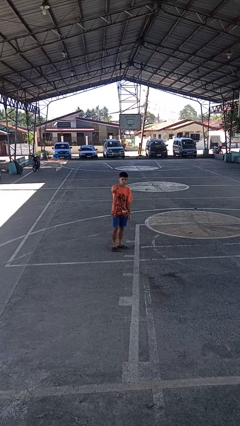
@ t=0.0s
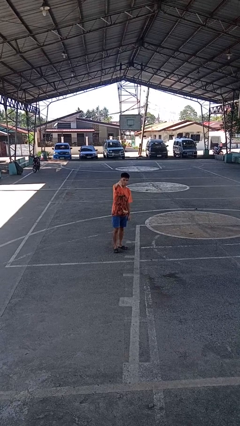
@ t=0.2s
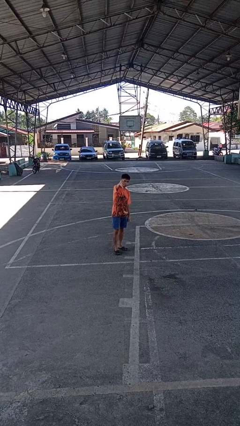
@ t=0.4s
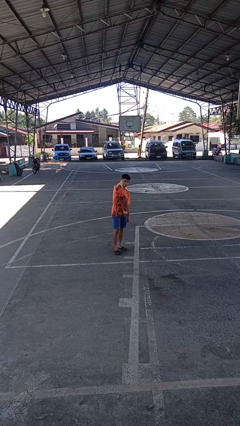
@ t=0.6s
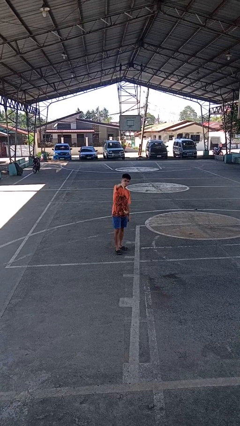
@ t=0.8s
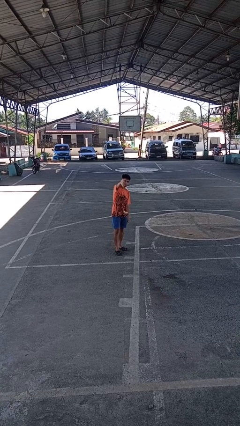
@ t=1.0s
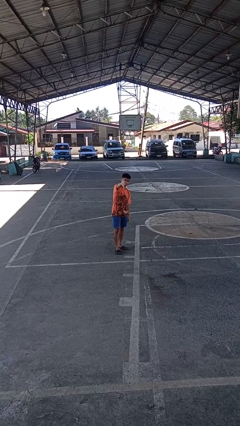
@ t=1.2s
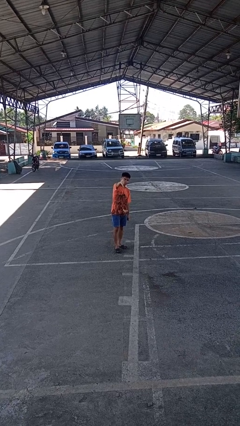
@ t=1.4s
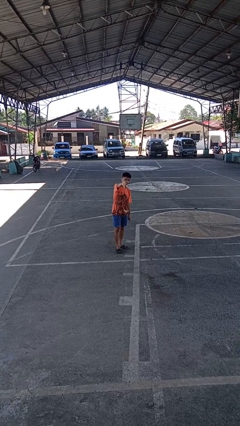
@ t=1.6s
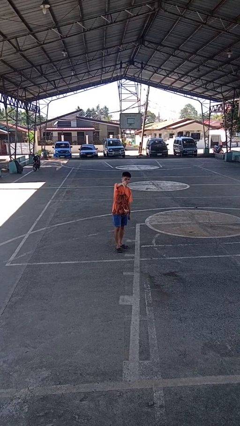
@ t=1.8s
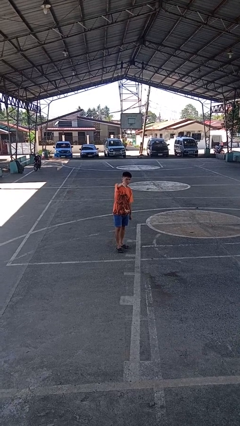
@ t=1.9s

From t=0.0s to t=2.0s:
person gestures thumbs down

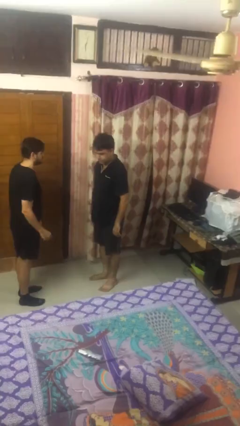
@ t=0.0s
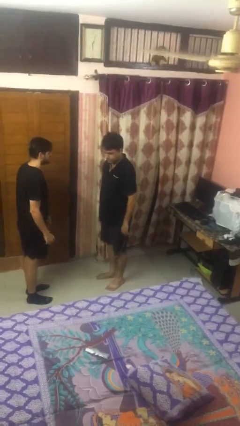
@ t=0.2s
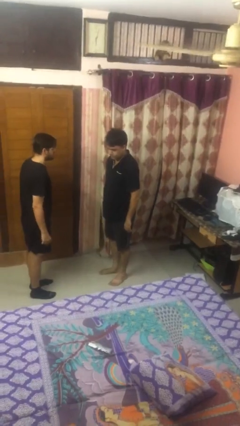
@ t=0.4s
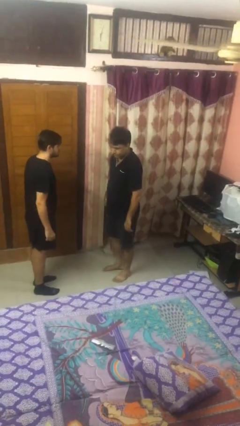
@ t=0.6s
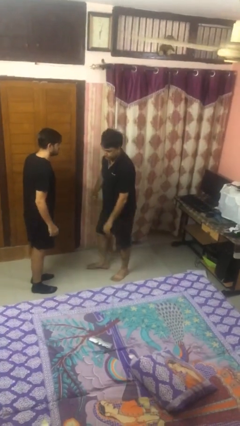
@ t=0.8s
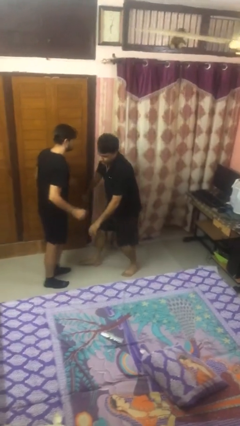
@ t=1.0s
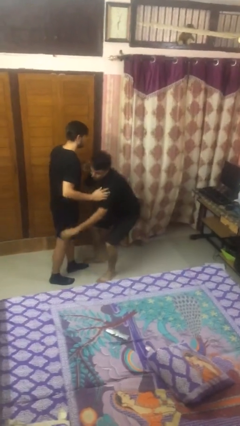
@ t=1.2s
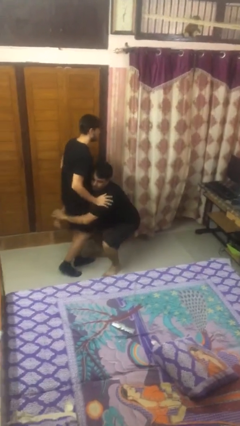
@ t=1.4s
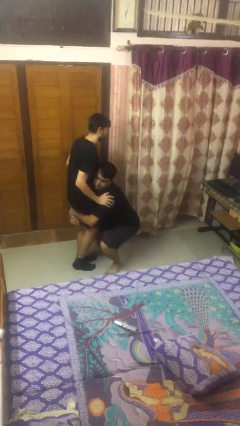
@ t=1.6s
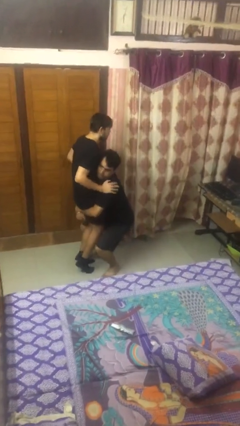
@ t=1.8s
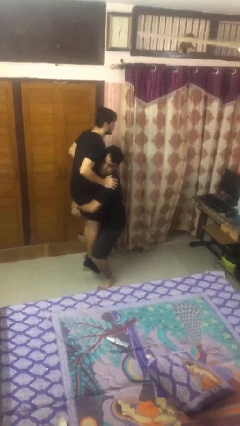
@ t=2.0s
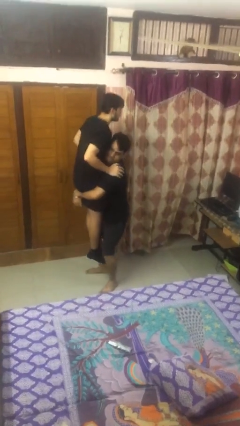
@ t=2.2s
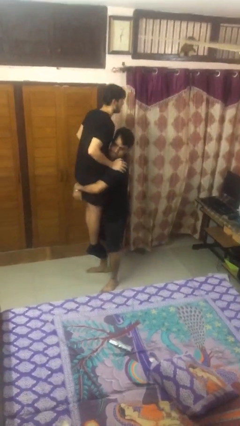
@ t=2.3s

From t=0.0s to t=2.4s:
person picks up person

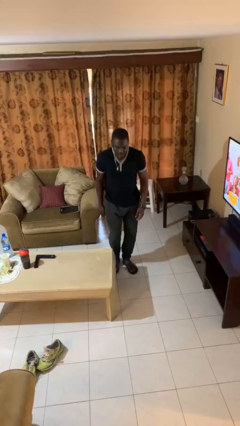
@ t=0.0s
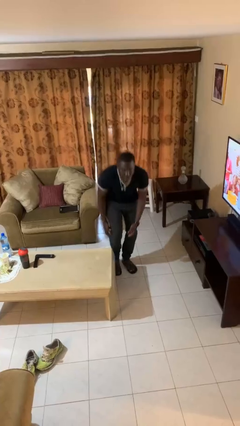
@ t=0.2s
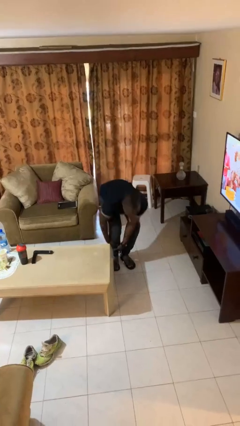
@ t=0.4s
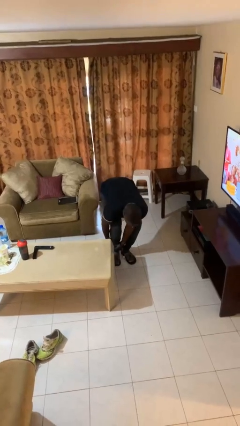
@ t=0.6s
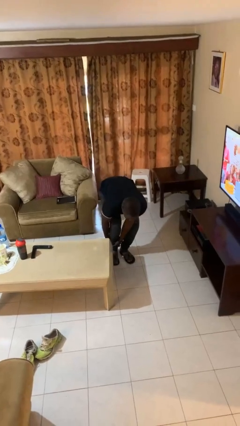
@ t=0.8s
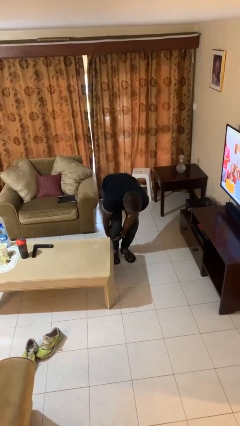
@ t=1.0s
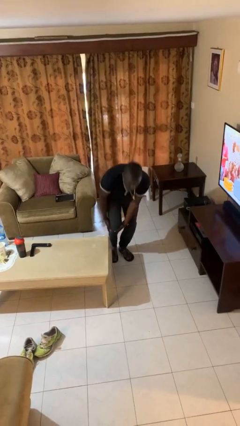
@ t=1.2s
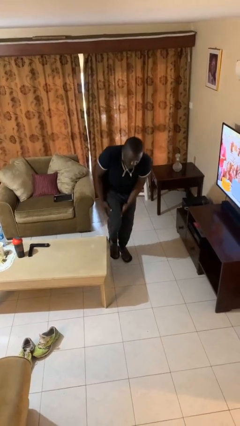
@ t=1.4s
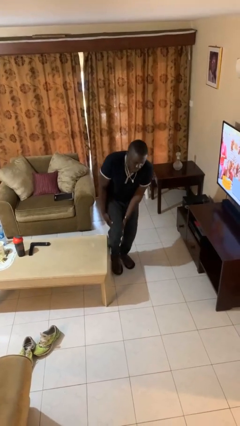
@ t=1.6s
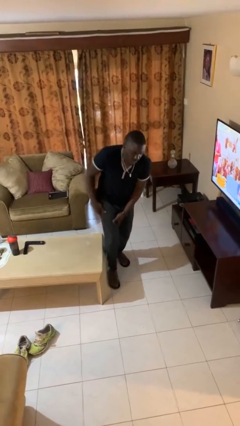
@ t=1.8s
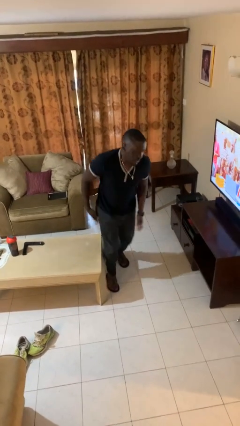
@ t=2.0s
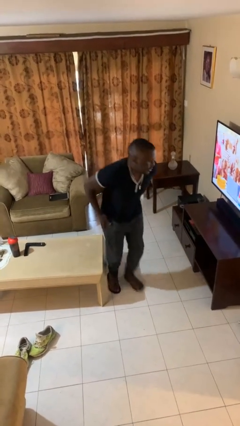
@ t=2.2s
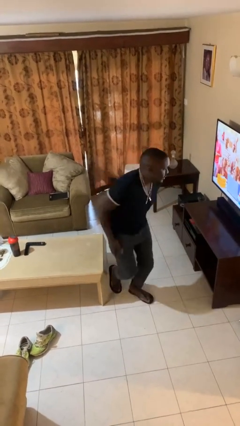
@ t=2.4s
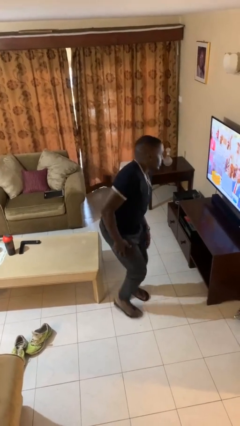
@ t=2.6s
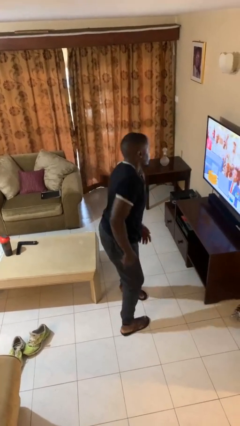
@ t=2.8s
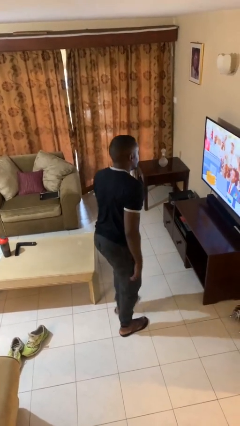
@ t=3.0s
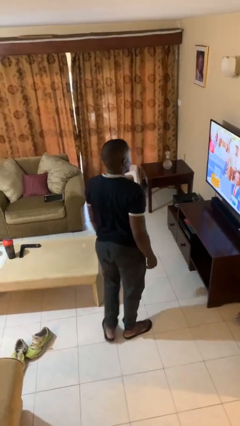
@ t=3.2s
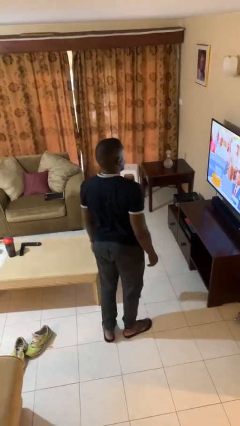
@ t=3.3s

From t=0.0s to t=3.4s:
person bumps into table

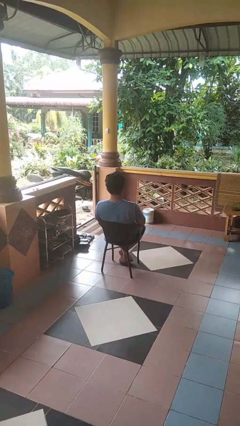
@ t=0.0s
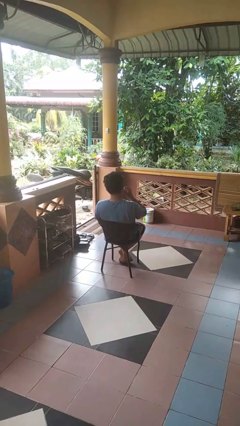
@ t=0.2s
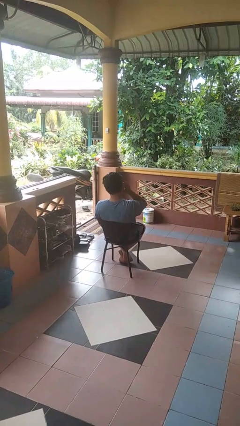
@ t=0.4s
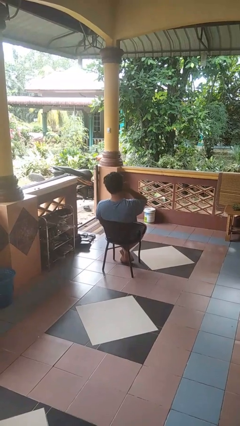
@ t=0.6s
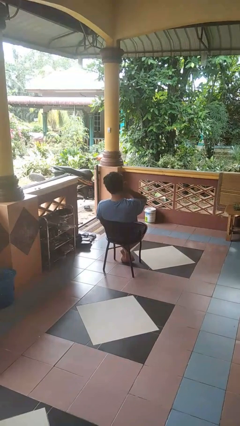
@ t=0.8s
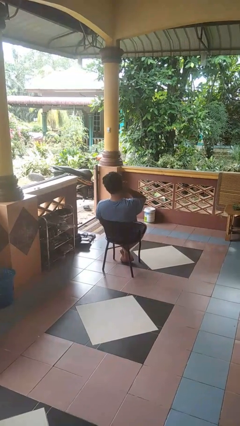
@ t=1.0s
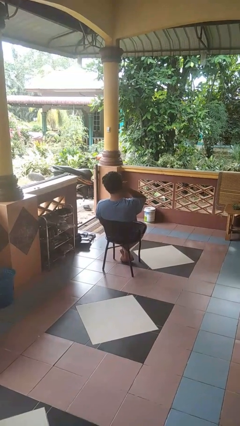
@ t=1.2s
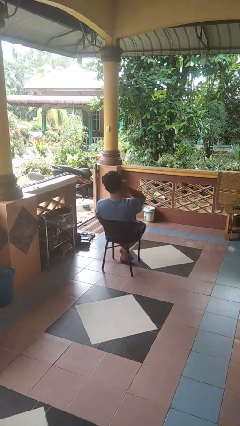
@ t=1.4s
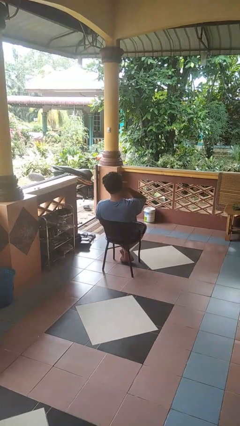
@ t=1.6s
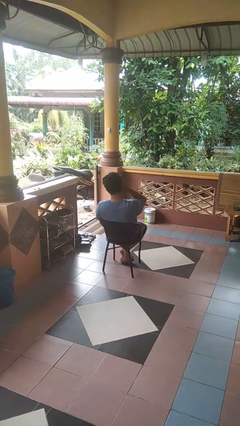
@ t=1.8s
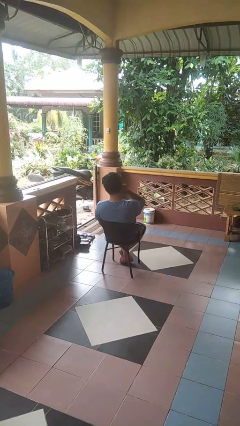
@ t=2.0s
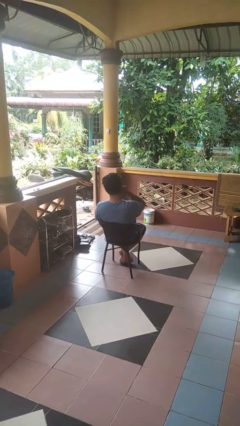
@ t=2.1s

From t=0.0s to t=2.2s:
person touches earlobe

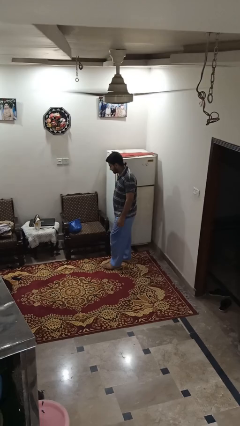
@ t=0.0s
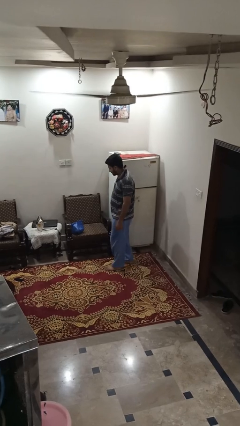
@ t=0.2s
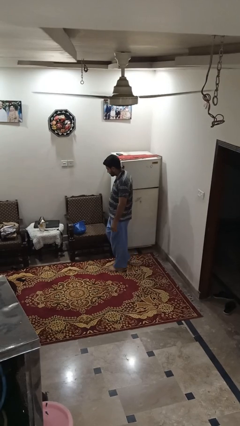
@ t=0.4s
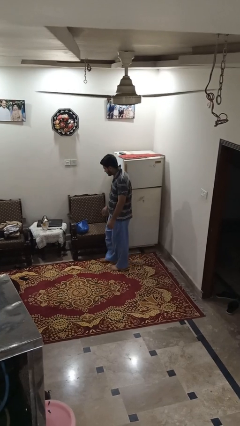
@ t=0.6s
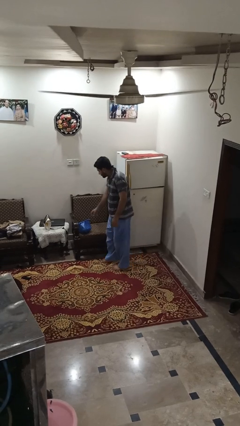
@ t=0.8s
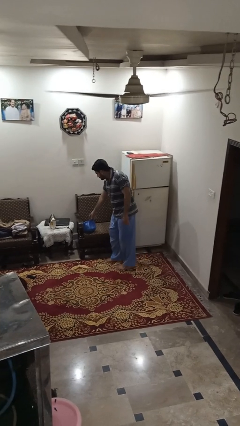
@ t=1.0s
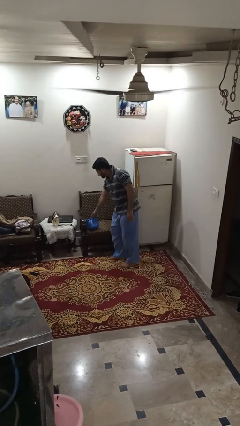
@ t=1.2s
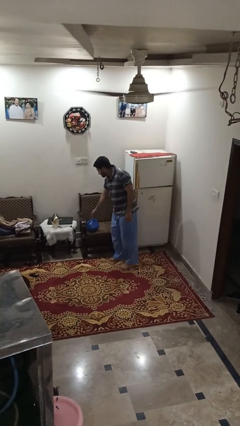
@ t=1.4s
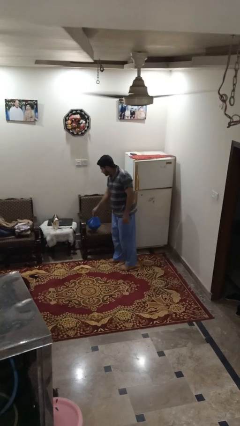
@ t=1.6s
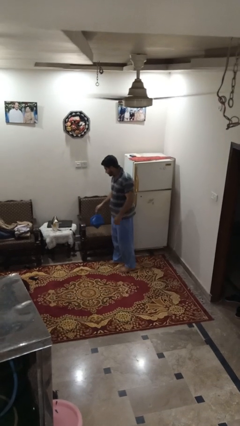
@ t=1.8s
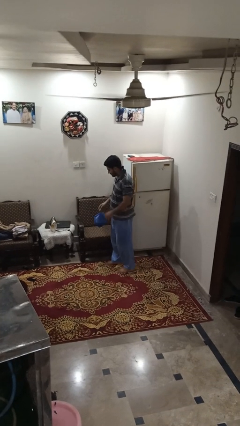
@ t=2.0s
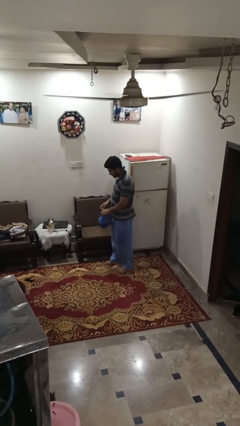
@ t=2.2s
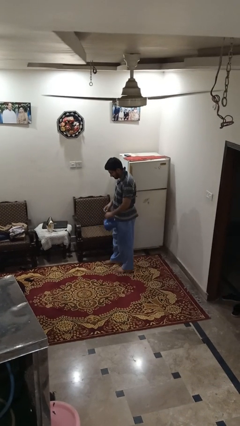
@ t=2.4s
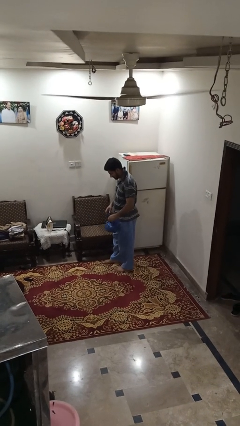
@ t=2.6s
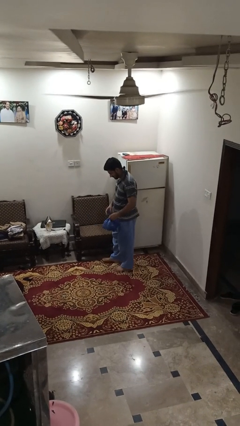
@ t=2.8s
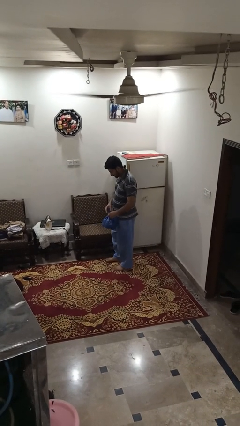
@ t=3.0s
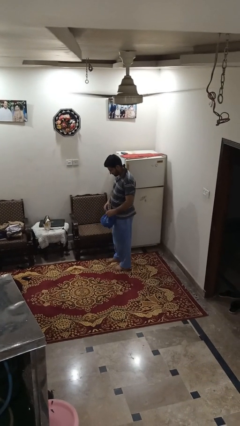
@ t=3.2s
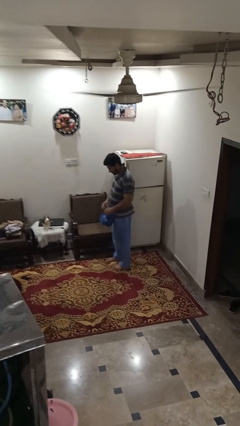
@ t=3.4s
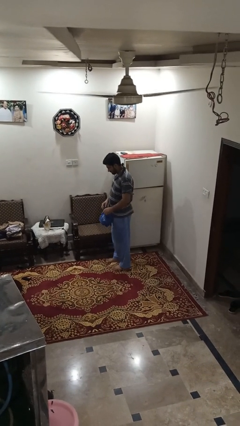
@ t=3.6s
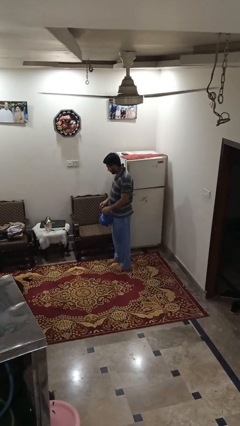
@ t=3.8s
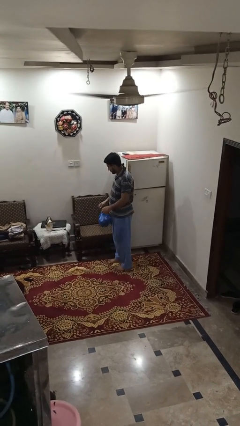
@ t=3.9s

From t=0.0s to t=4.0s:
person picks up object from couch

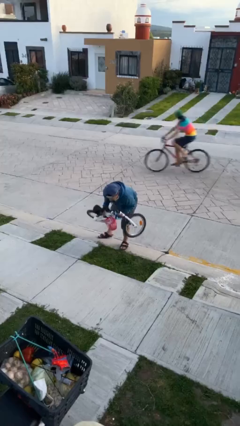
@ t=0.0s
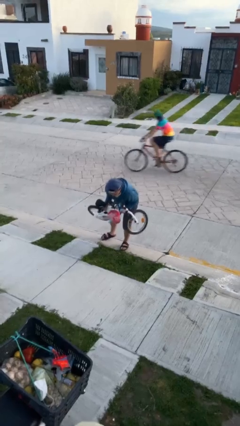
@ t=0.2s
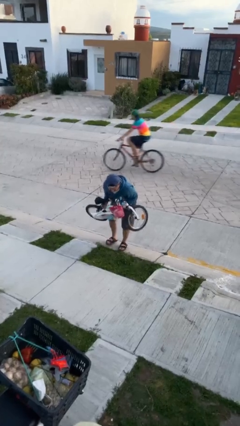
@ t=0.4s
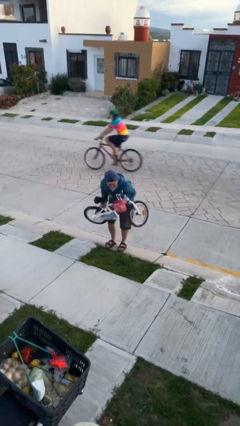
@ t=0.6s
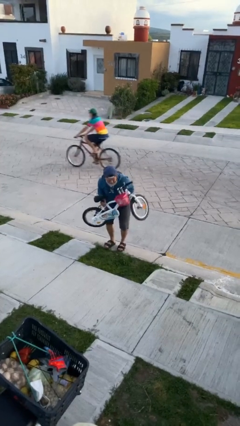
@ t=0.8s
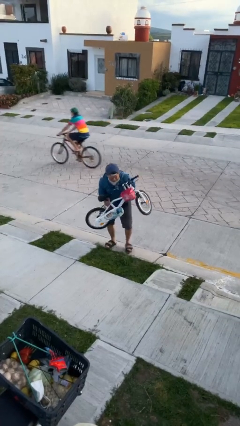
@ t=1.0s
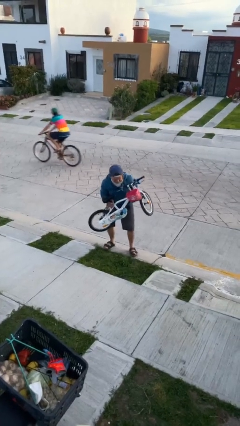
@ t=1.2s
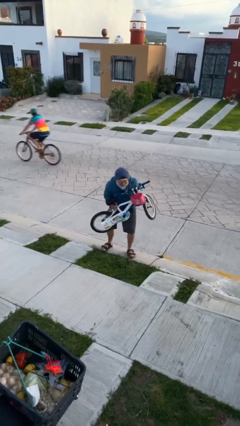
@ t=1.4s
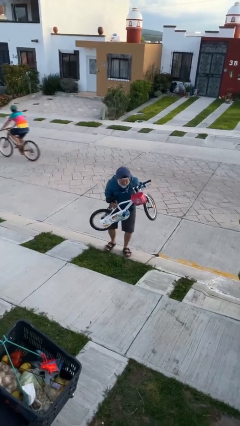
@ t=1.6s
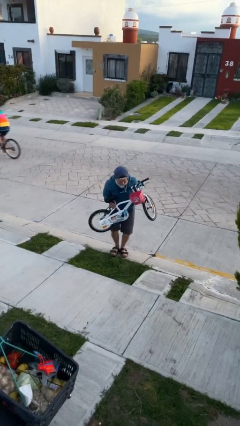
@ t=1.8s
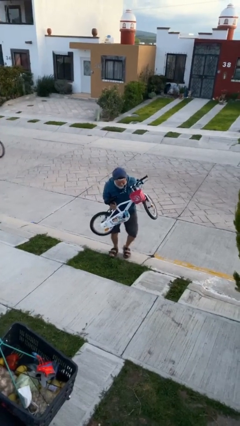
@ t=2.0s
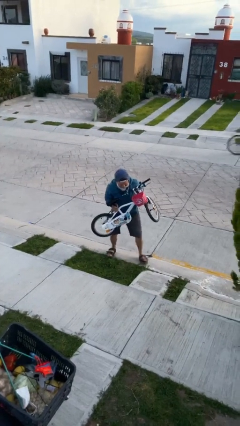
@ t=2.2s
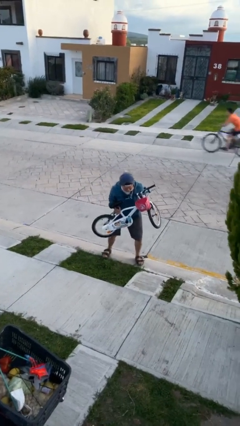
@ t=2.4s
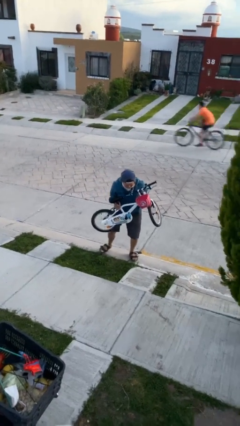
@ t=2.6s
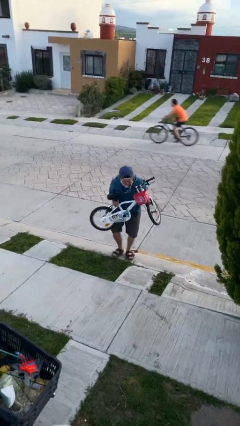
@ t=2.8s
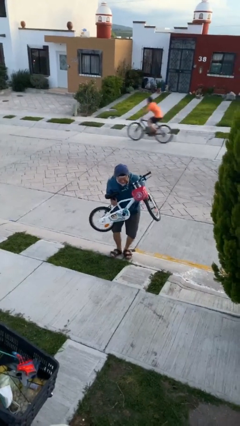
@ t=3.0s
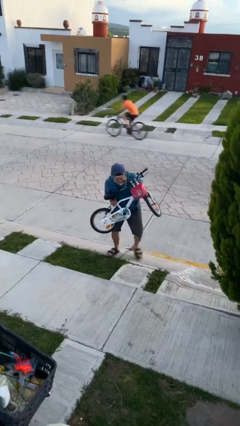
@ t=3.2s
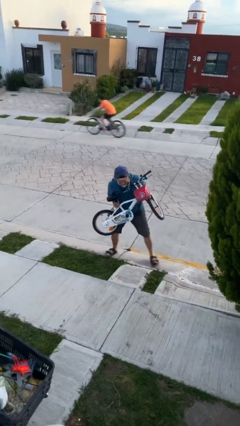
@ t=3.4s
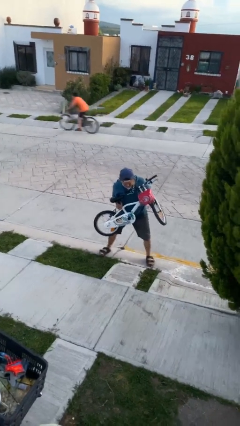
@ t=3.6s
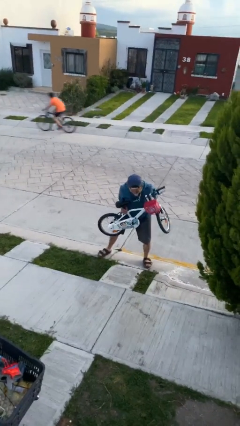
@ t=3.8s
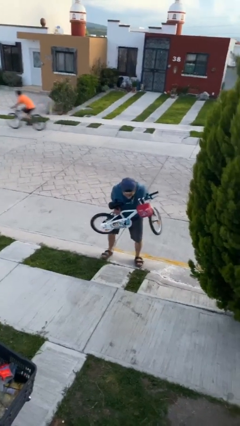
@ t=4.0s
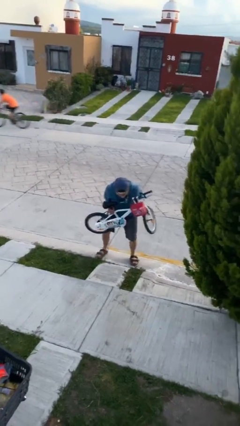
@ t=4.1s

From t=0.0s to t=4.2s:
person carries heavy object
